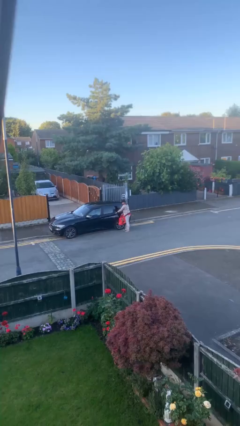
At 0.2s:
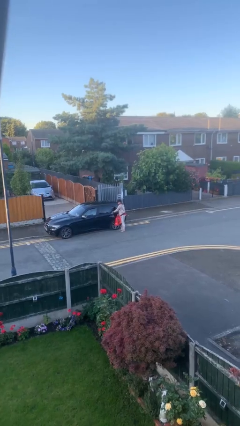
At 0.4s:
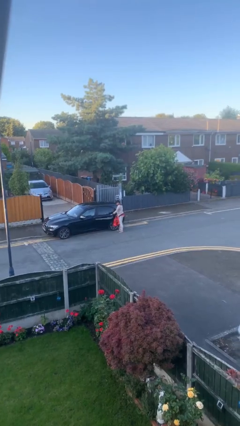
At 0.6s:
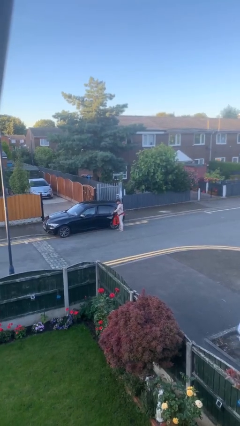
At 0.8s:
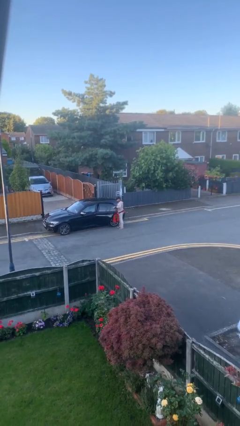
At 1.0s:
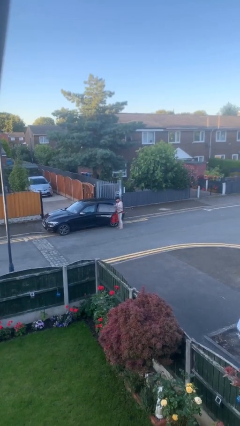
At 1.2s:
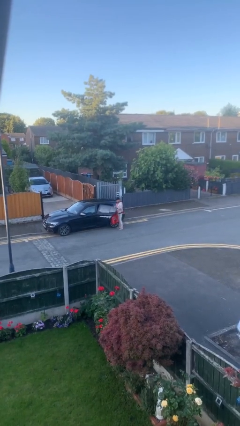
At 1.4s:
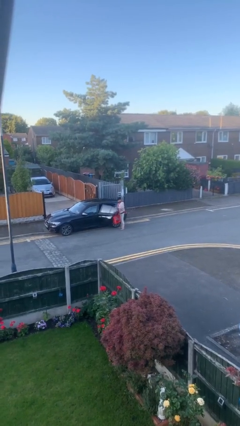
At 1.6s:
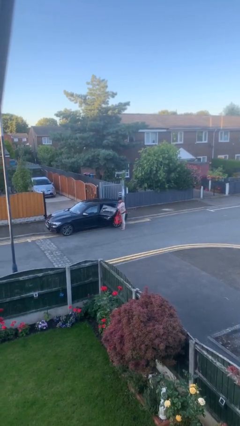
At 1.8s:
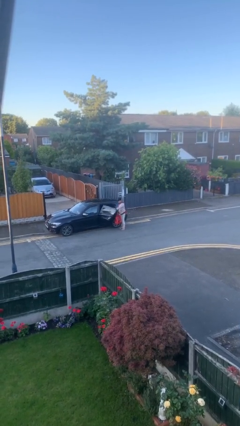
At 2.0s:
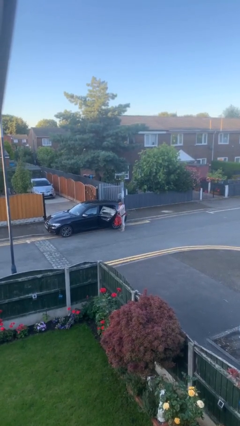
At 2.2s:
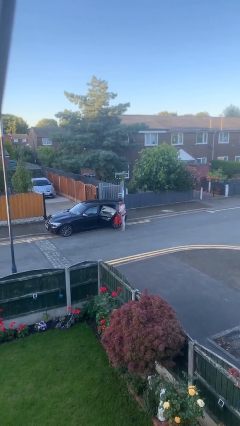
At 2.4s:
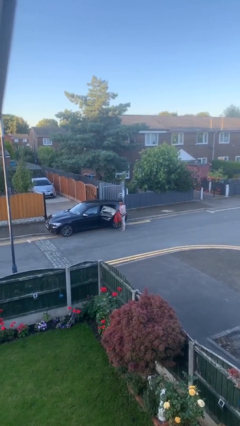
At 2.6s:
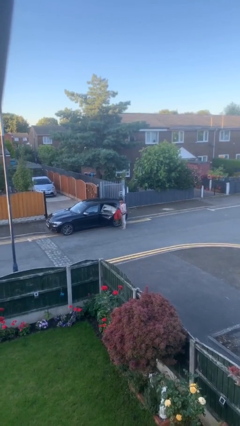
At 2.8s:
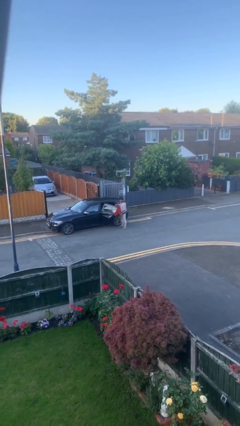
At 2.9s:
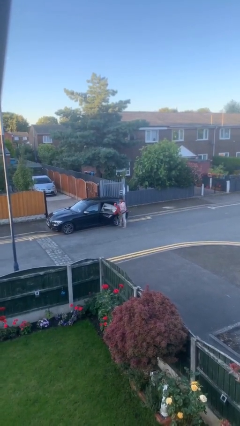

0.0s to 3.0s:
person opens car door

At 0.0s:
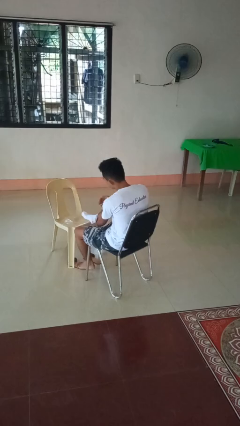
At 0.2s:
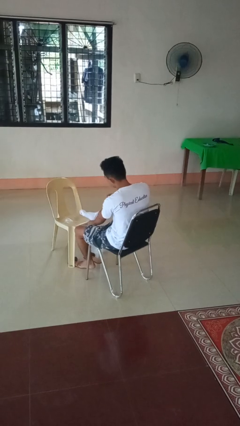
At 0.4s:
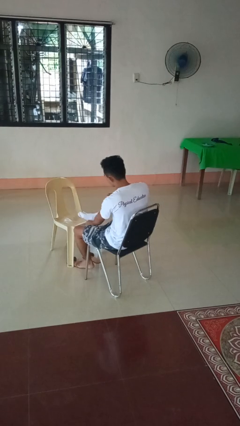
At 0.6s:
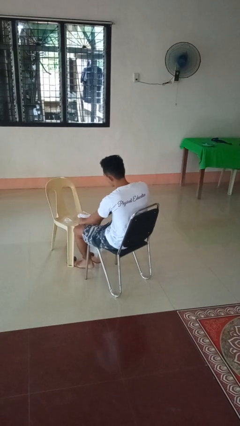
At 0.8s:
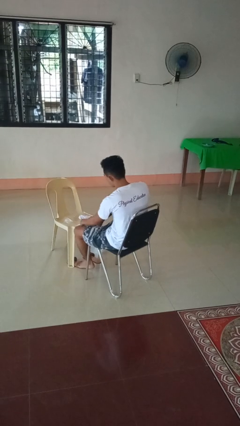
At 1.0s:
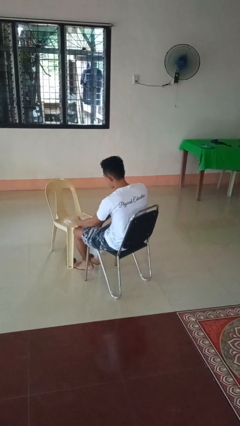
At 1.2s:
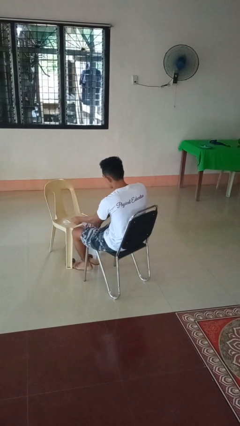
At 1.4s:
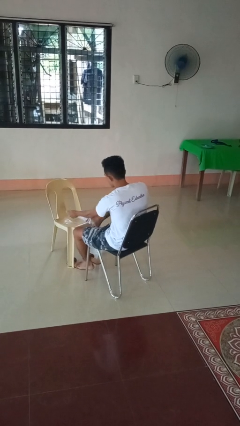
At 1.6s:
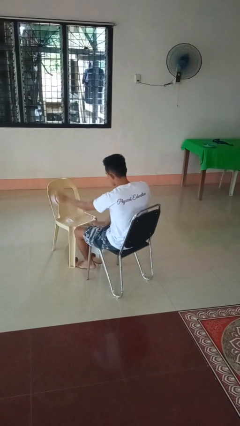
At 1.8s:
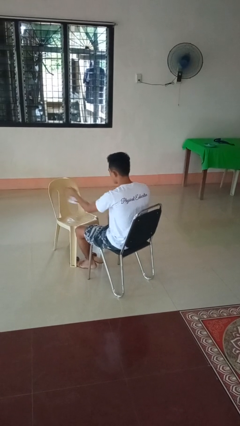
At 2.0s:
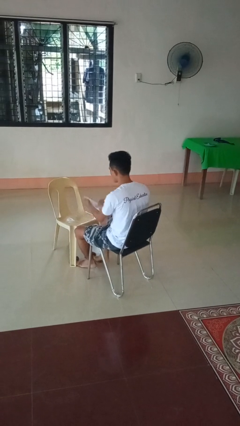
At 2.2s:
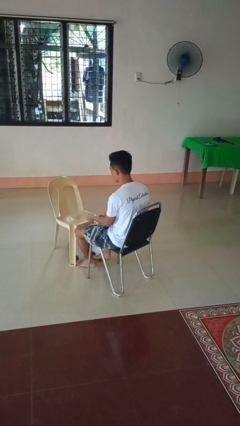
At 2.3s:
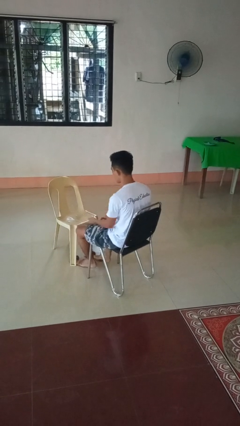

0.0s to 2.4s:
person takes off socks

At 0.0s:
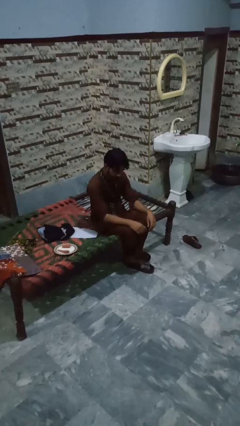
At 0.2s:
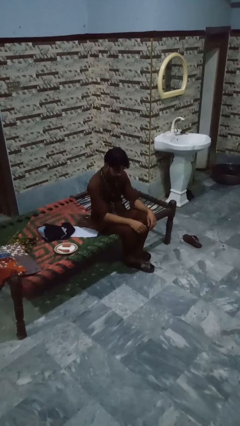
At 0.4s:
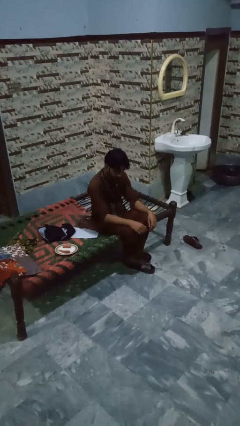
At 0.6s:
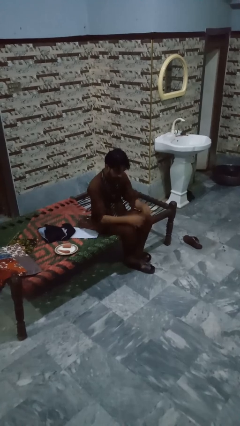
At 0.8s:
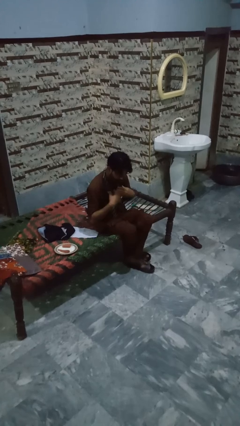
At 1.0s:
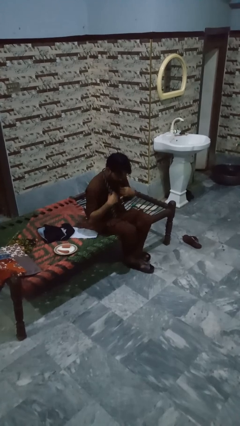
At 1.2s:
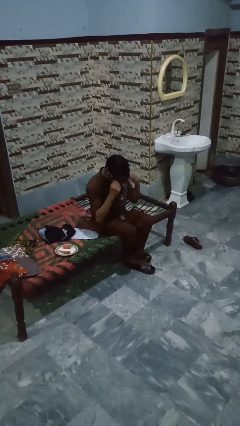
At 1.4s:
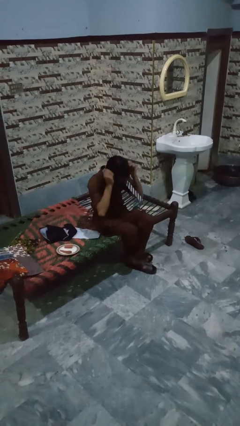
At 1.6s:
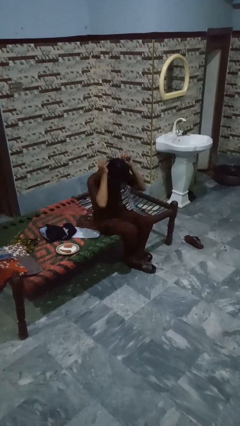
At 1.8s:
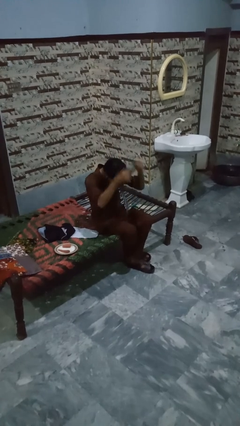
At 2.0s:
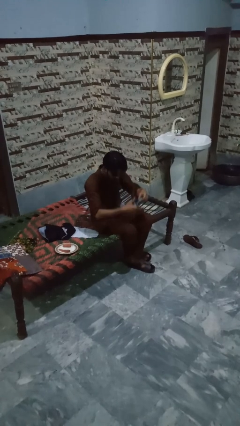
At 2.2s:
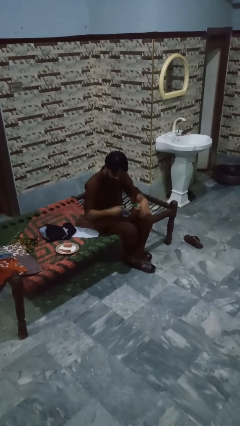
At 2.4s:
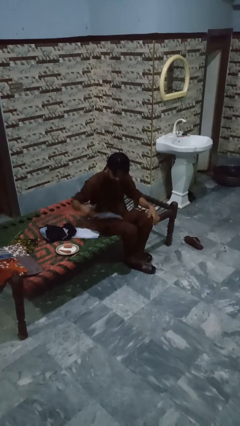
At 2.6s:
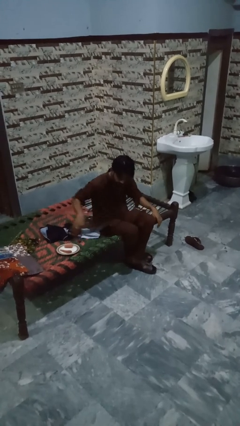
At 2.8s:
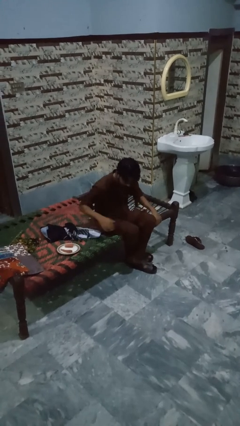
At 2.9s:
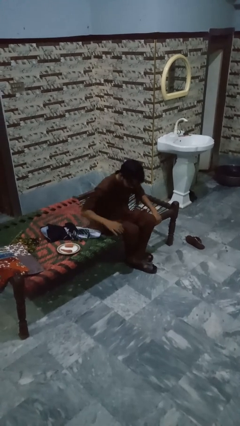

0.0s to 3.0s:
person takes off necktie

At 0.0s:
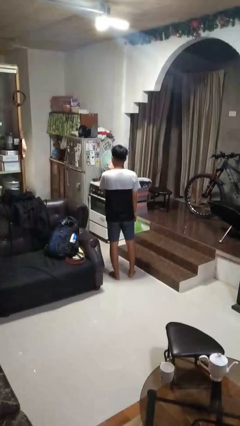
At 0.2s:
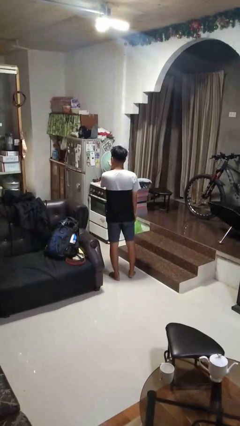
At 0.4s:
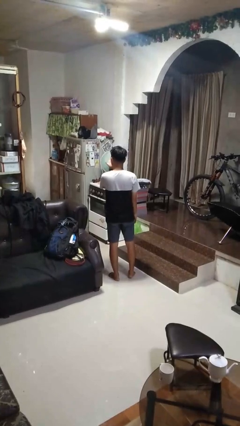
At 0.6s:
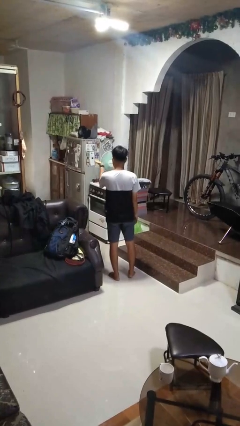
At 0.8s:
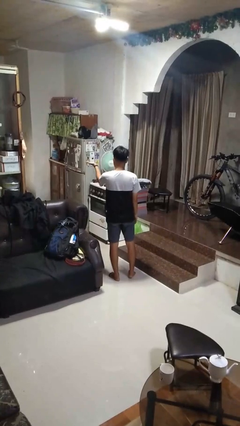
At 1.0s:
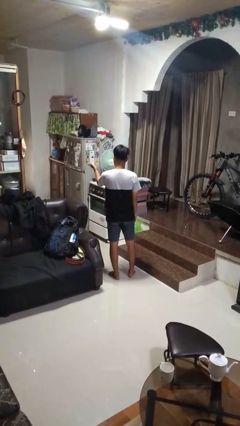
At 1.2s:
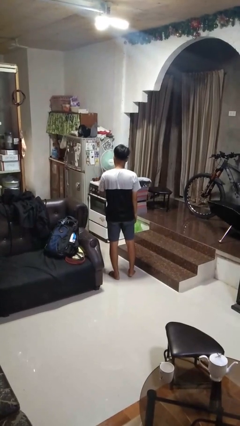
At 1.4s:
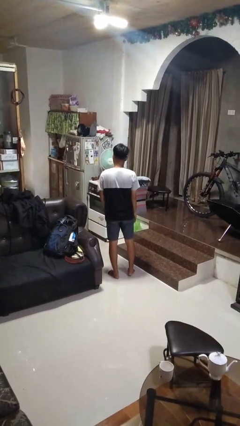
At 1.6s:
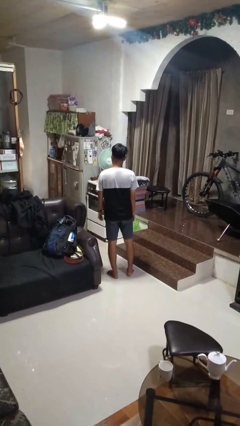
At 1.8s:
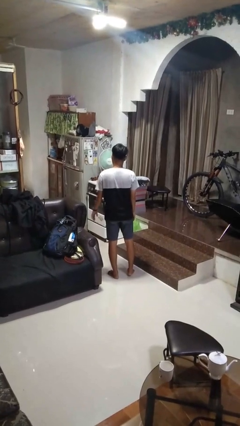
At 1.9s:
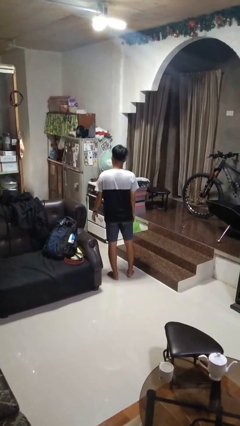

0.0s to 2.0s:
person gestures blow kiss

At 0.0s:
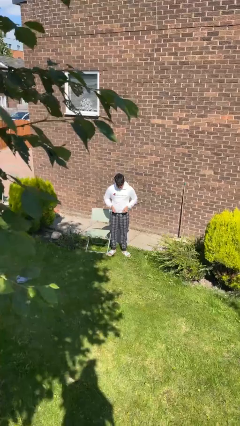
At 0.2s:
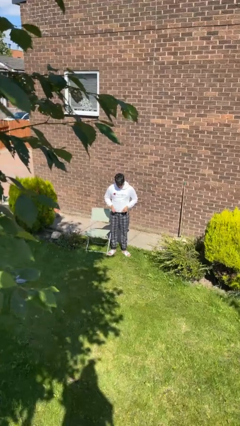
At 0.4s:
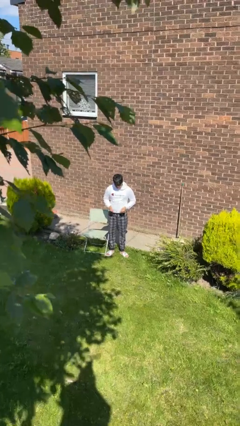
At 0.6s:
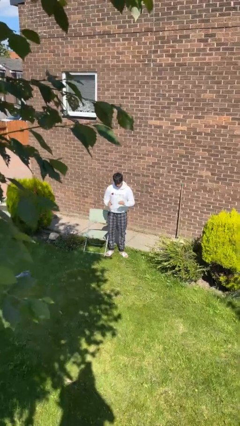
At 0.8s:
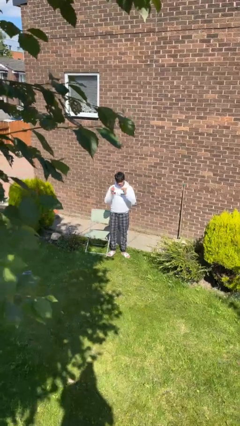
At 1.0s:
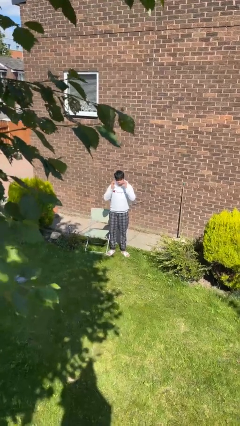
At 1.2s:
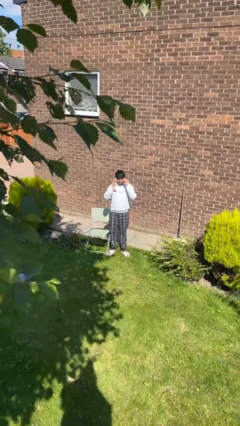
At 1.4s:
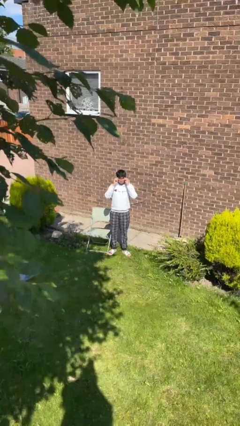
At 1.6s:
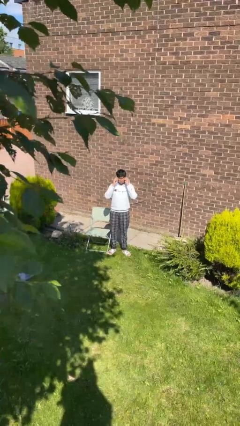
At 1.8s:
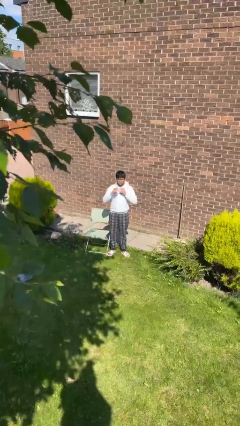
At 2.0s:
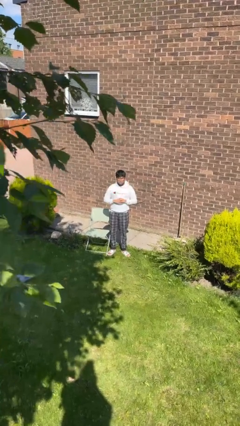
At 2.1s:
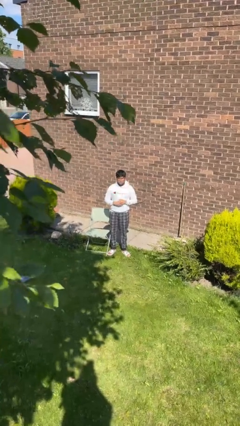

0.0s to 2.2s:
person puts on glasses

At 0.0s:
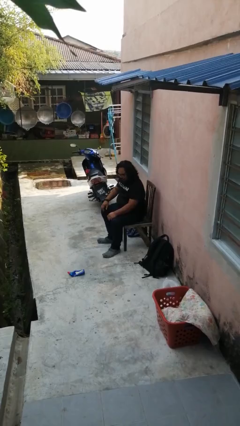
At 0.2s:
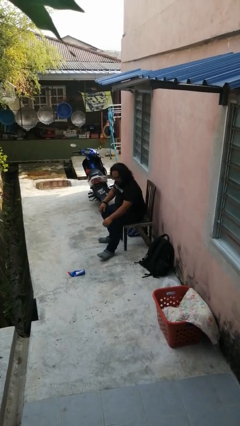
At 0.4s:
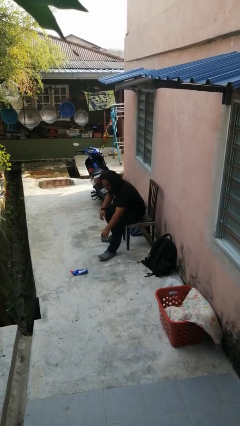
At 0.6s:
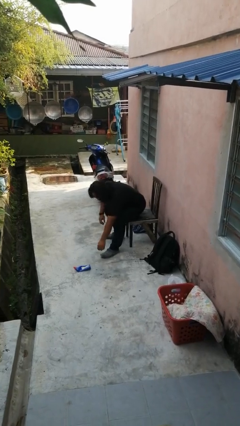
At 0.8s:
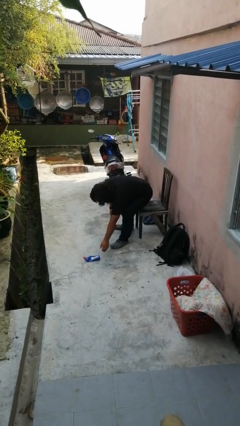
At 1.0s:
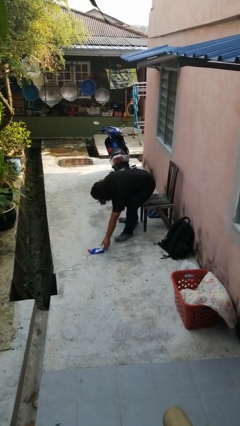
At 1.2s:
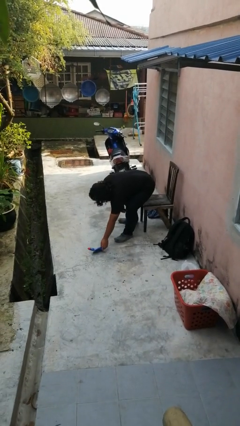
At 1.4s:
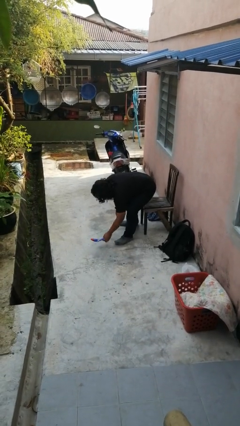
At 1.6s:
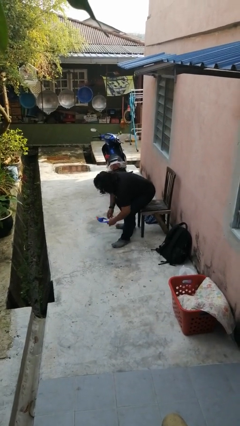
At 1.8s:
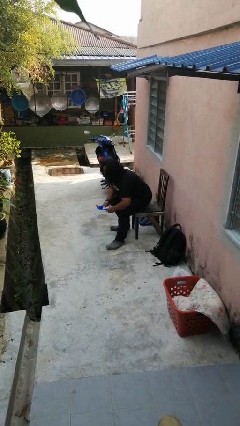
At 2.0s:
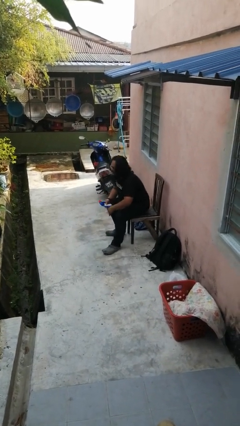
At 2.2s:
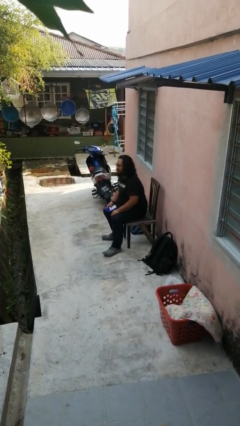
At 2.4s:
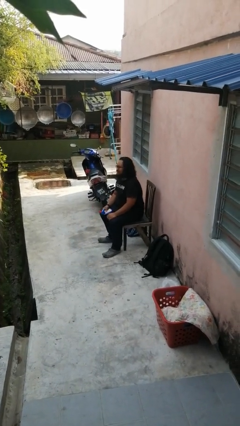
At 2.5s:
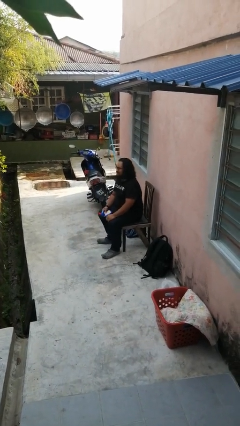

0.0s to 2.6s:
person picks up object from floor

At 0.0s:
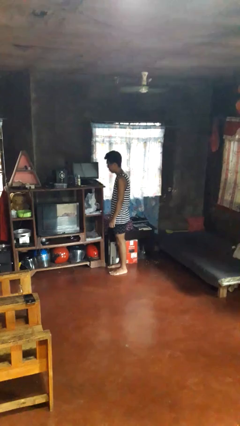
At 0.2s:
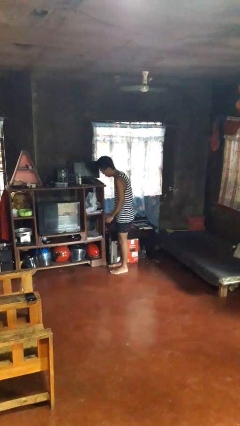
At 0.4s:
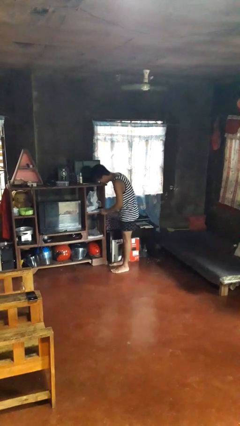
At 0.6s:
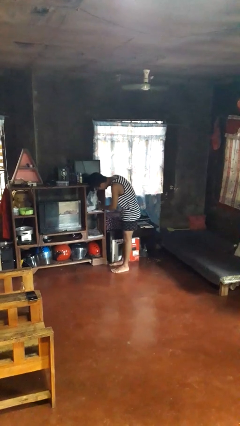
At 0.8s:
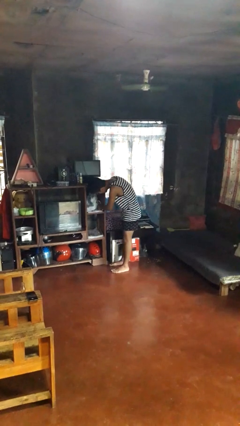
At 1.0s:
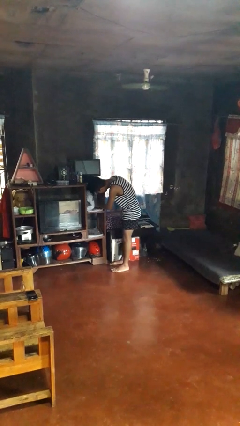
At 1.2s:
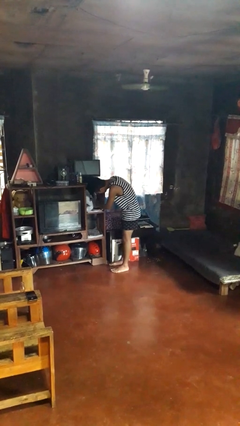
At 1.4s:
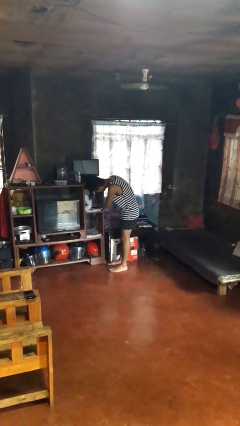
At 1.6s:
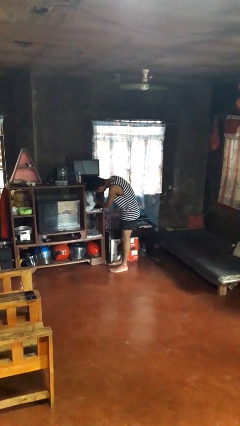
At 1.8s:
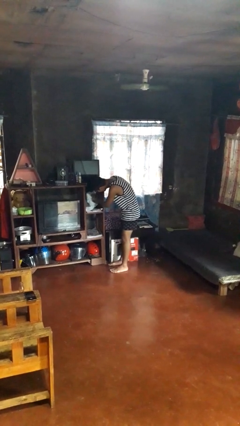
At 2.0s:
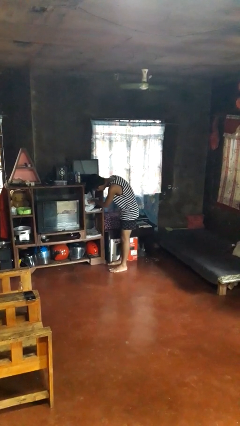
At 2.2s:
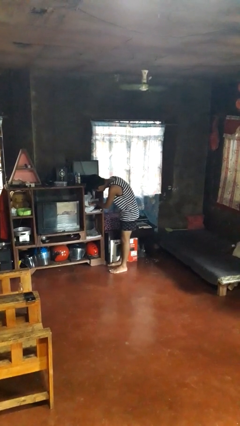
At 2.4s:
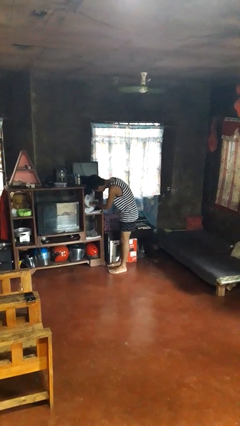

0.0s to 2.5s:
person searches in cabinet
